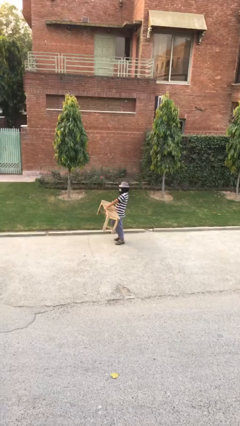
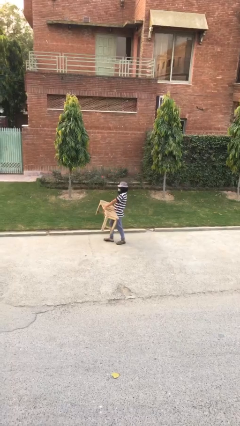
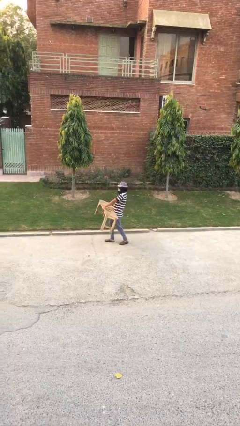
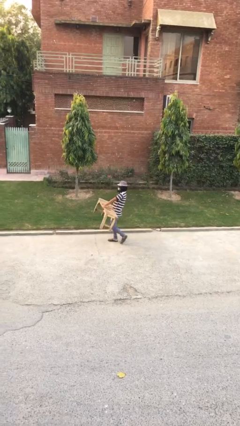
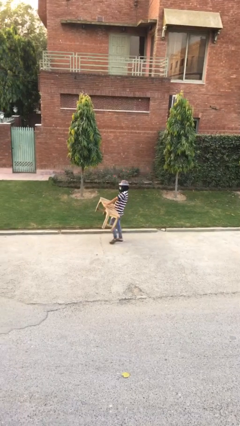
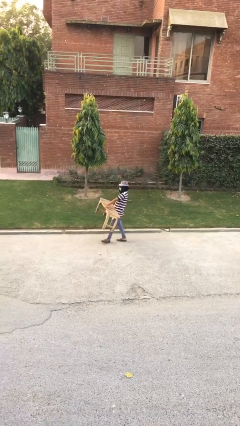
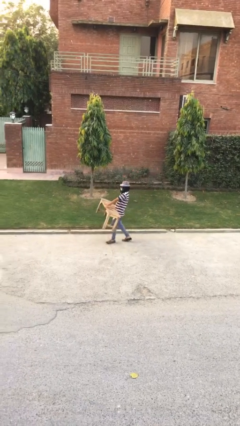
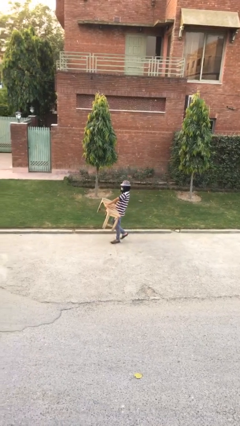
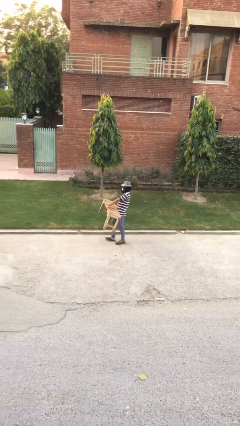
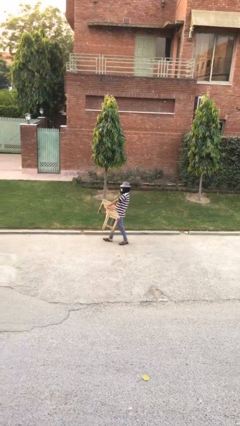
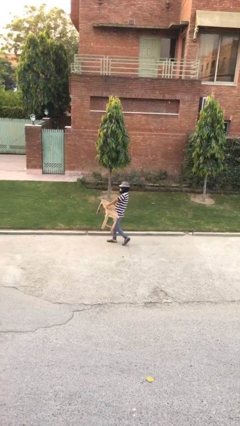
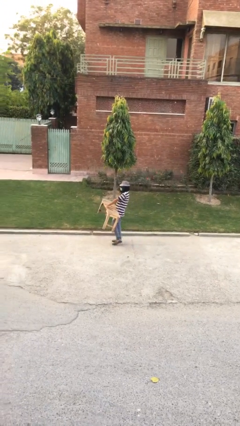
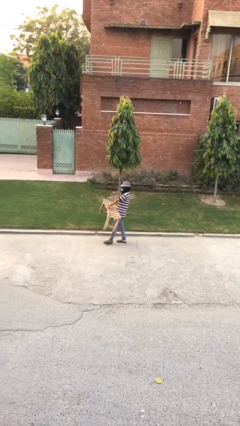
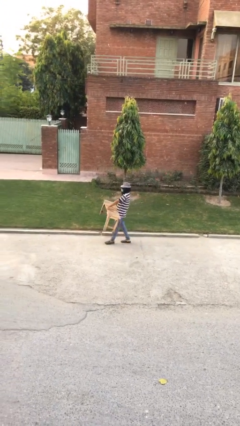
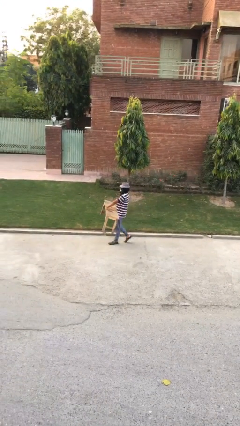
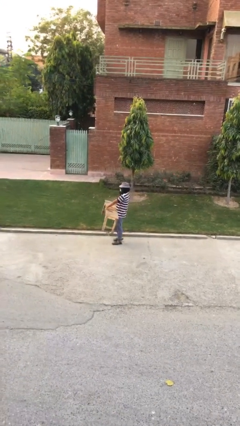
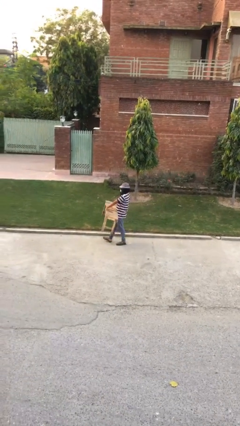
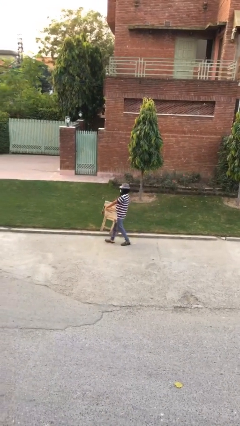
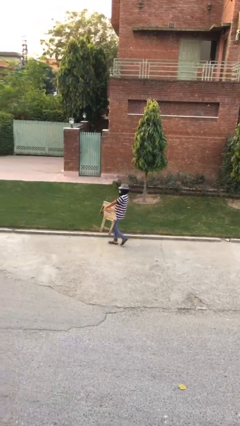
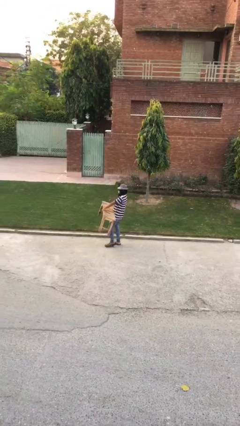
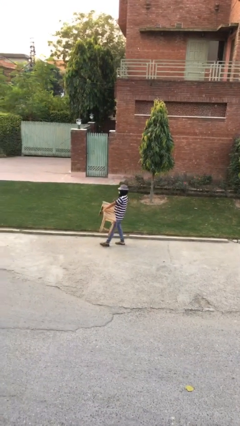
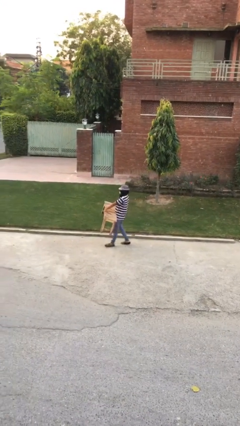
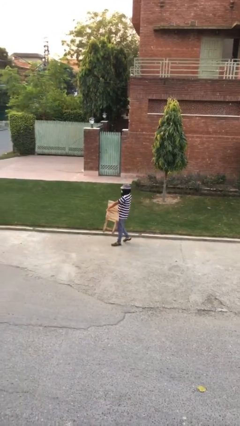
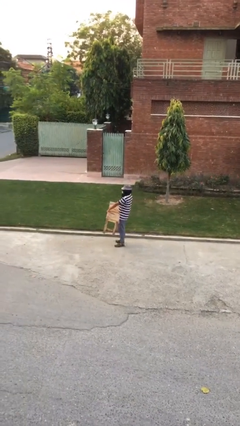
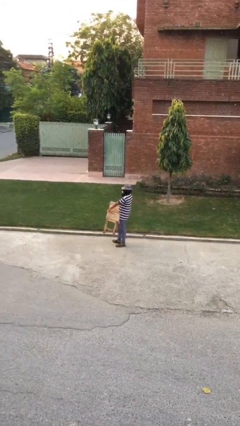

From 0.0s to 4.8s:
person carries heavy object

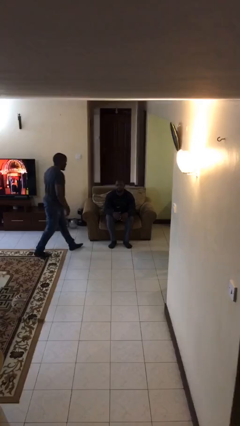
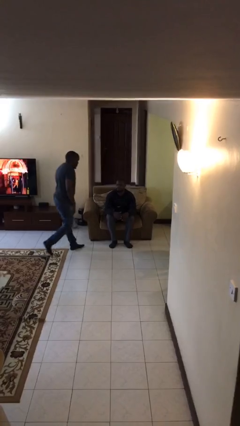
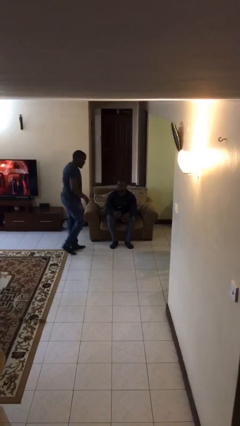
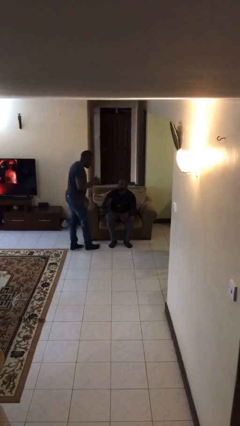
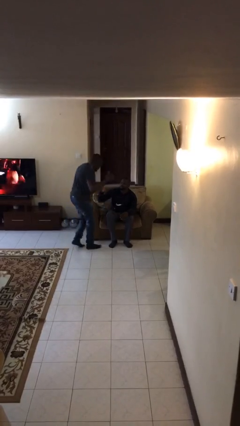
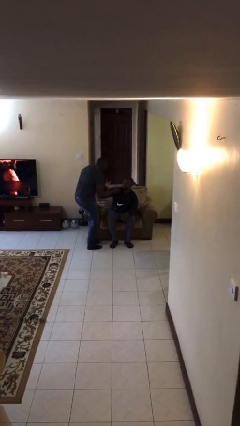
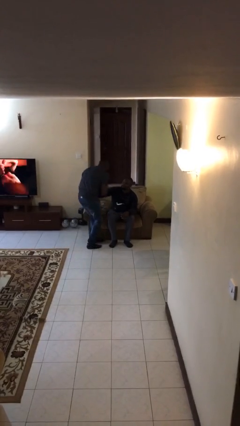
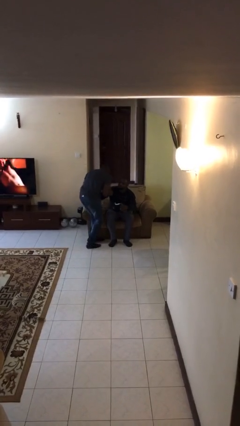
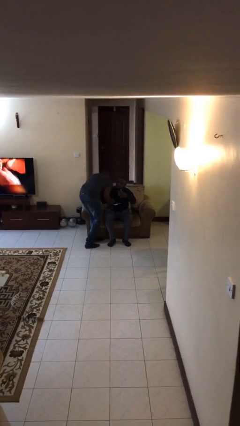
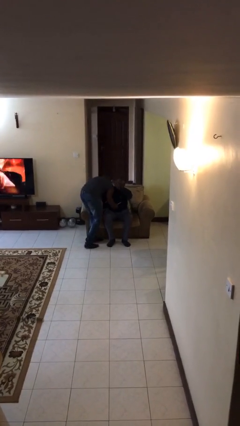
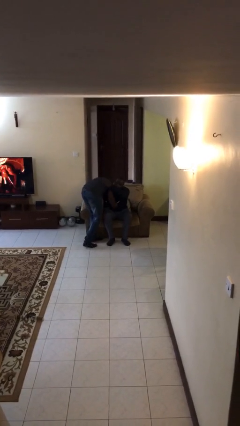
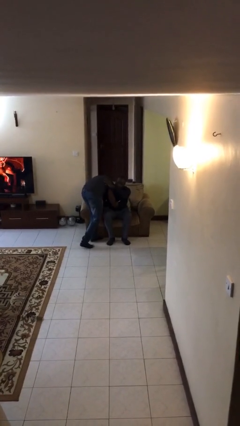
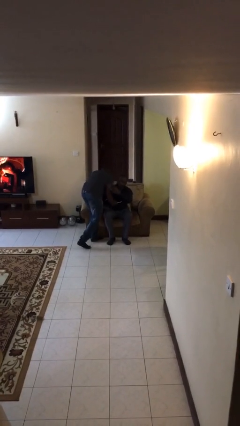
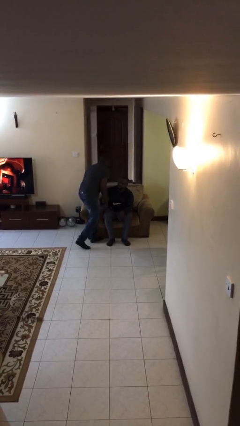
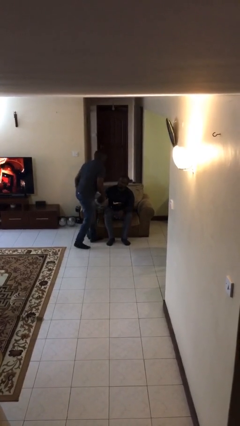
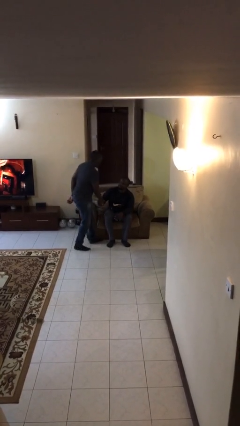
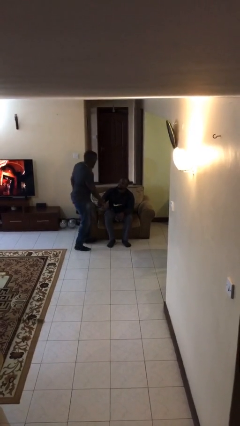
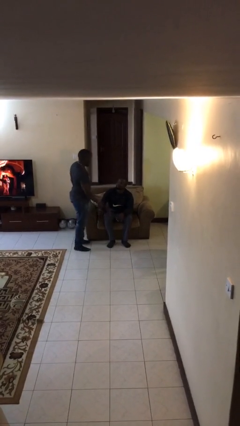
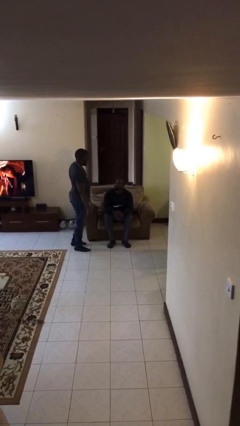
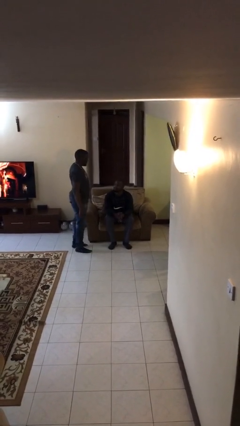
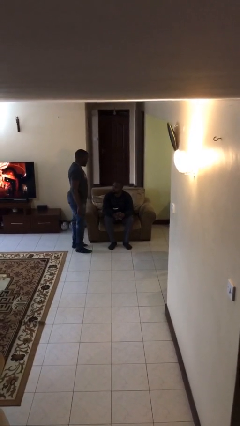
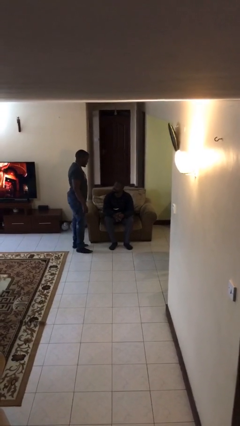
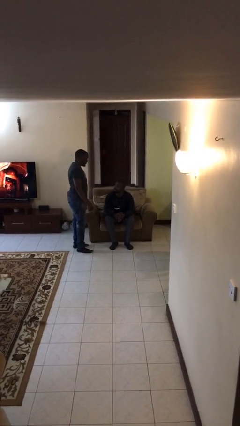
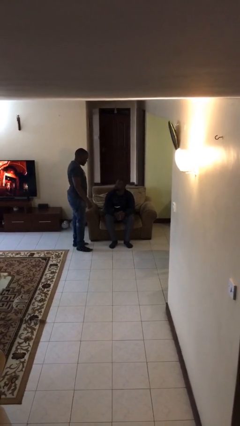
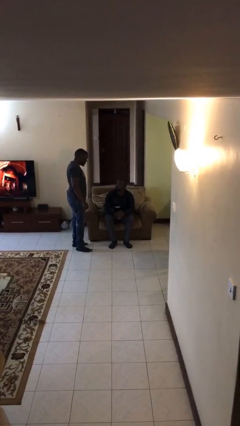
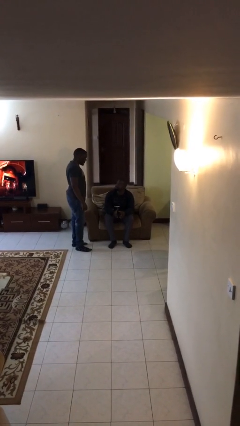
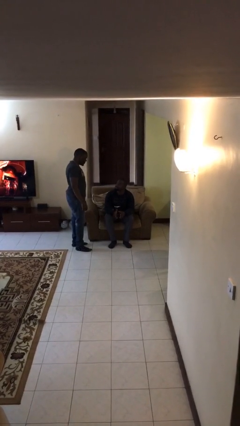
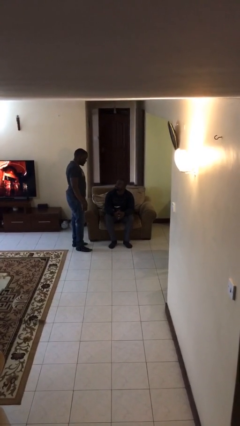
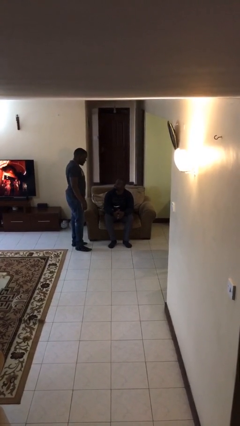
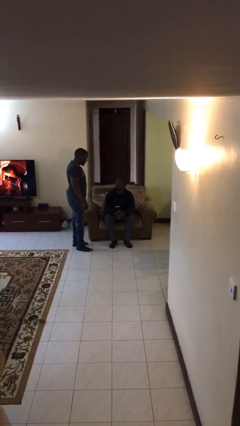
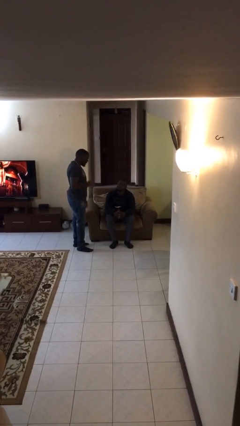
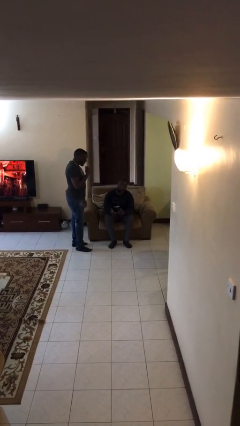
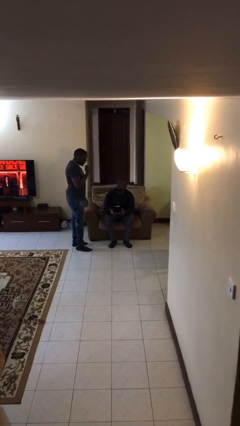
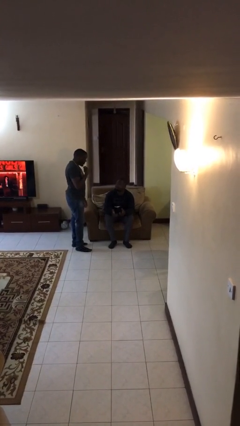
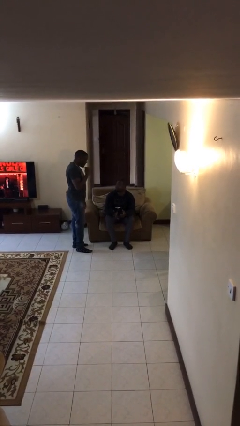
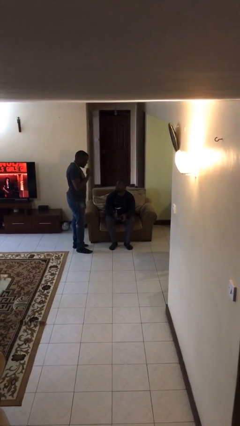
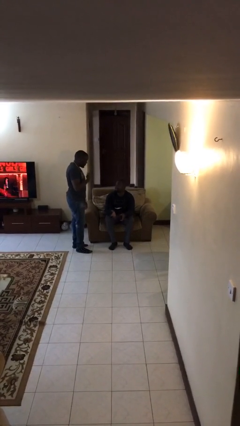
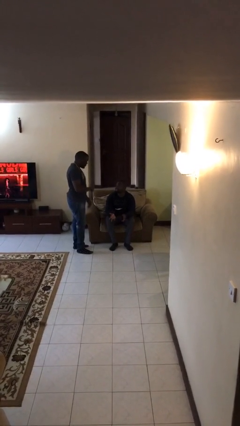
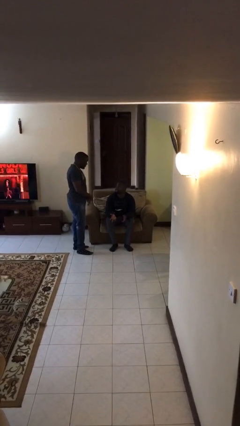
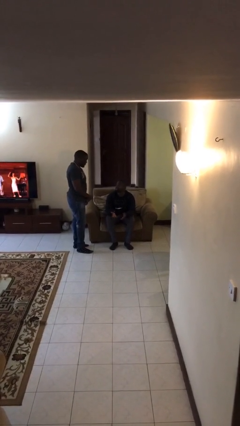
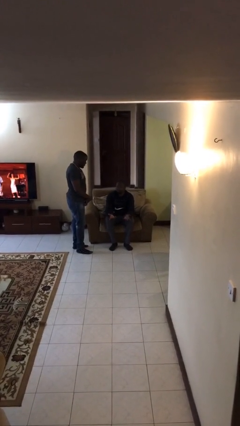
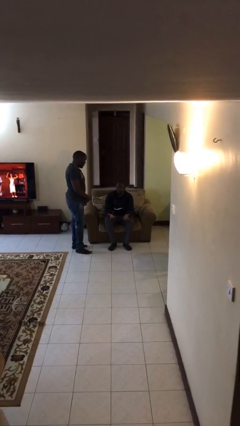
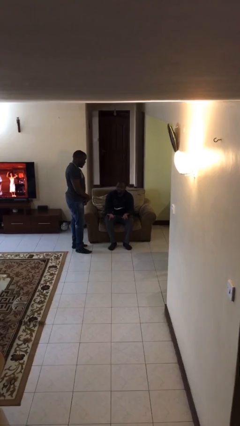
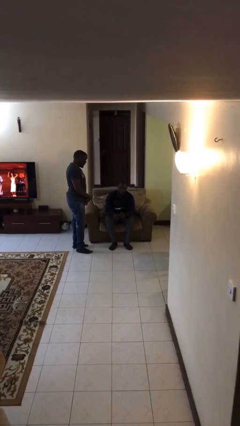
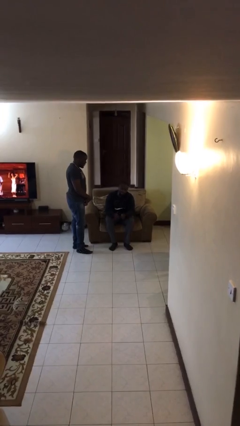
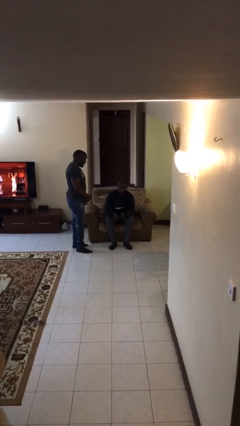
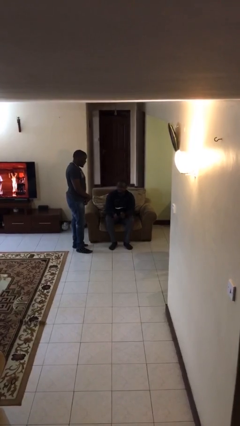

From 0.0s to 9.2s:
person embraces person

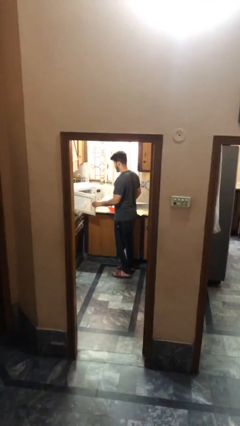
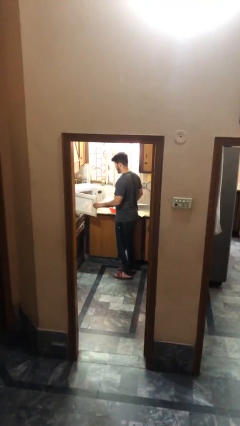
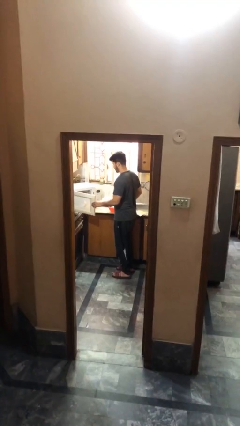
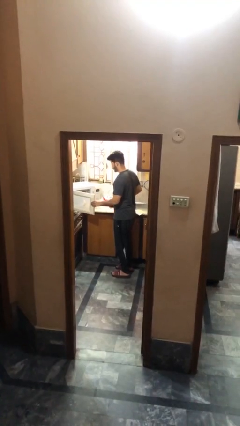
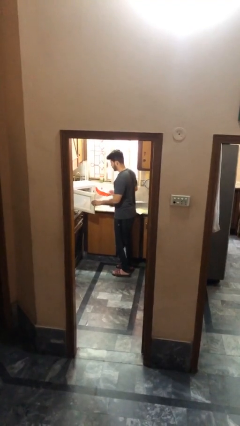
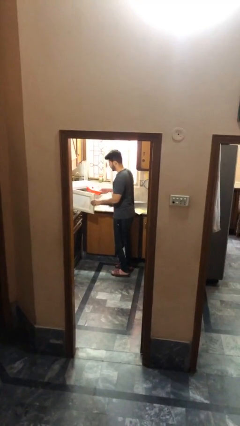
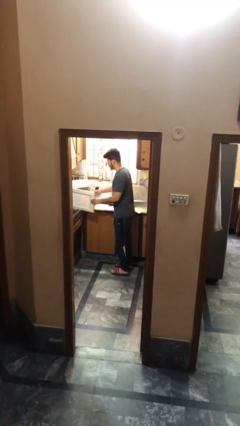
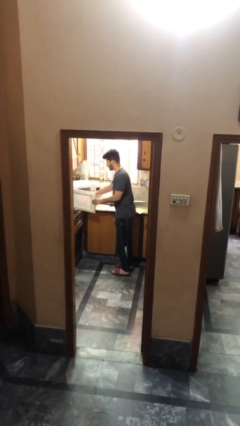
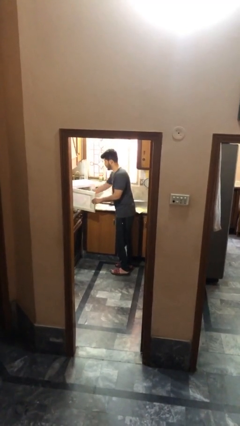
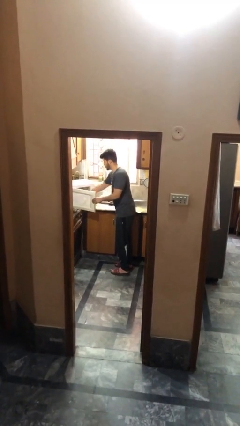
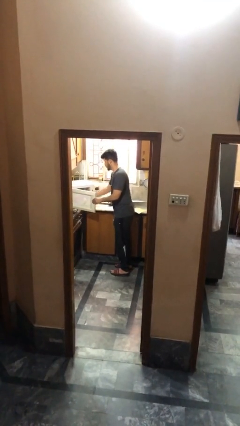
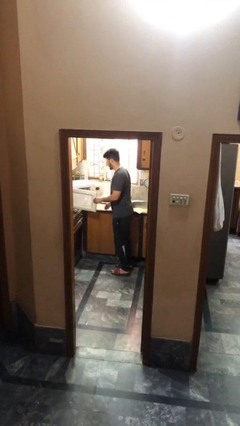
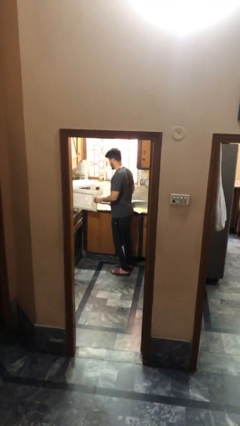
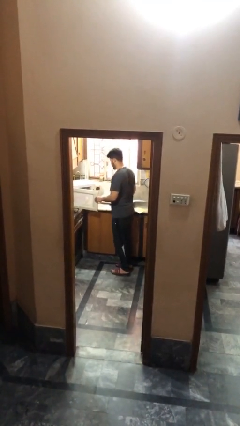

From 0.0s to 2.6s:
person puts object into microwave

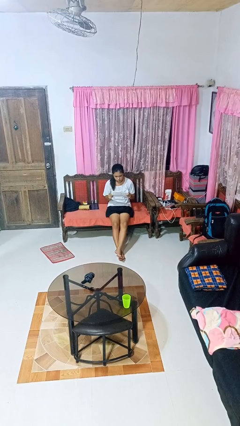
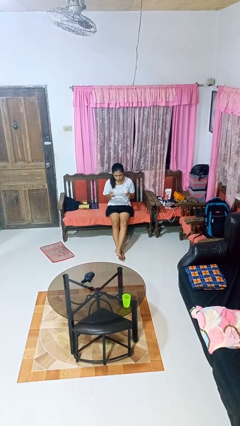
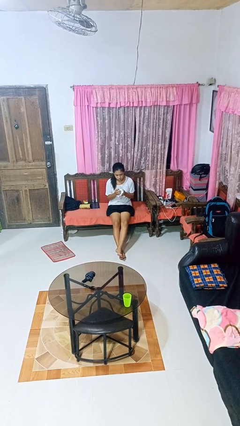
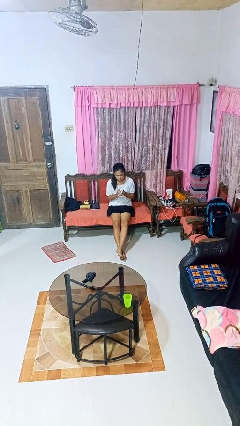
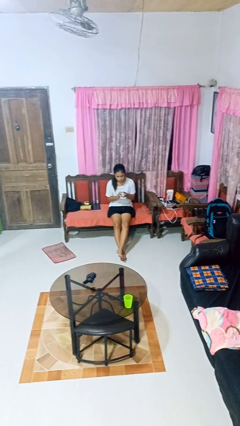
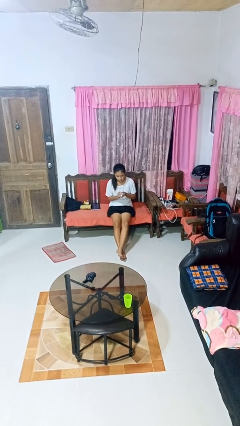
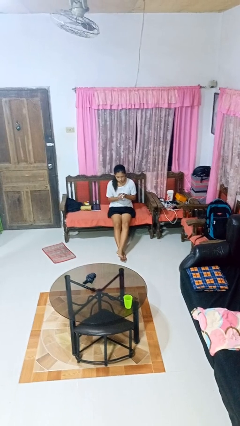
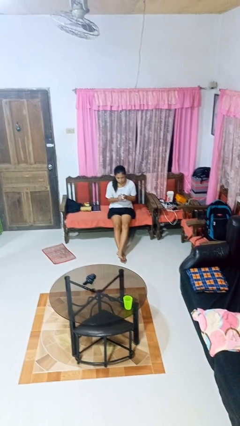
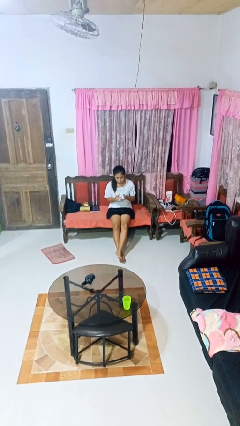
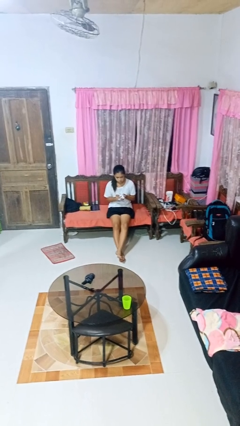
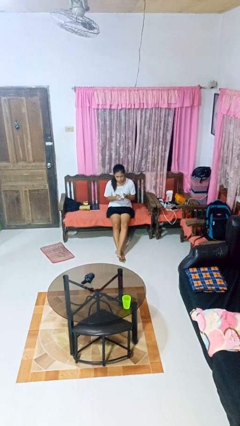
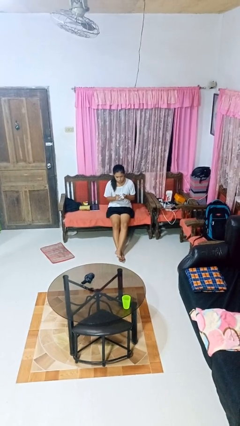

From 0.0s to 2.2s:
person crumples paper
